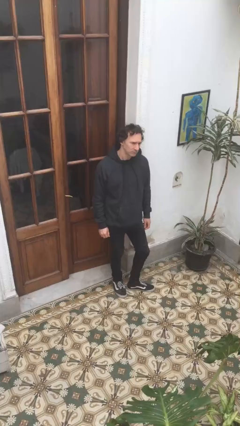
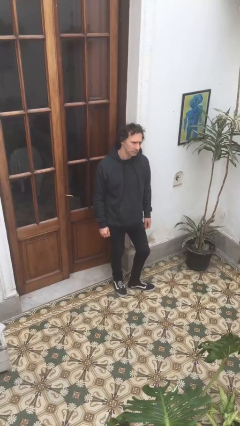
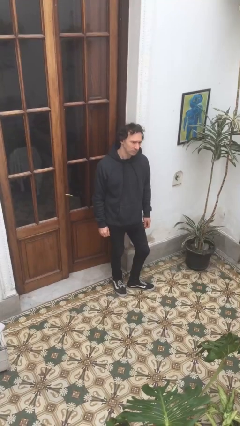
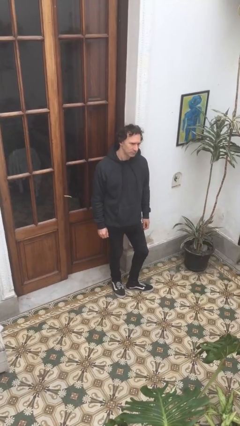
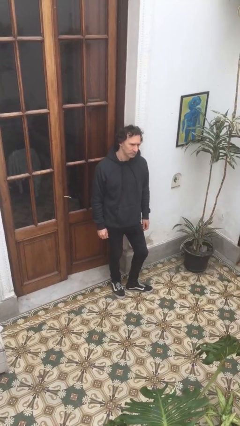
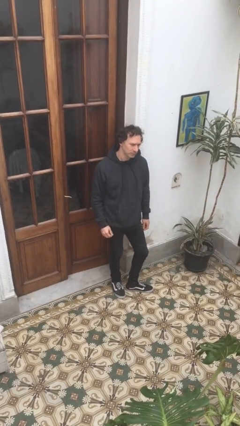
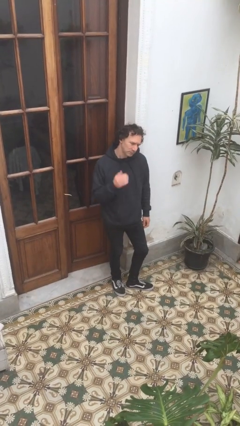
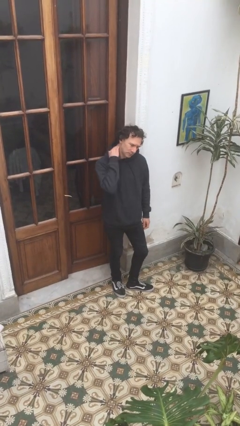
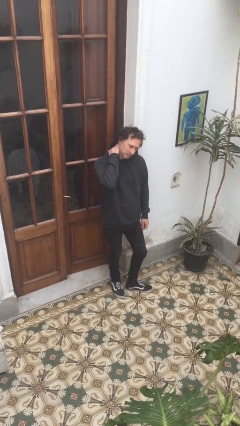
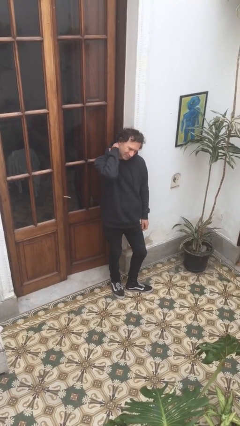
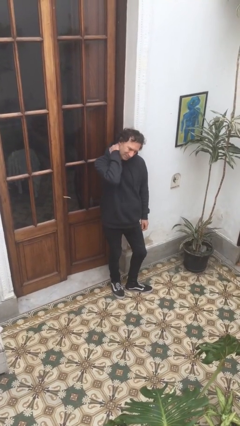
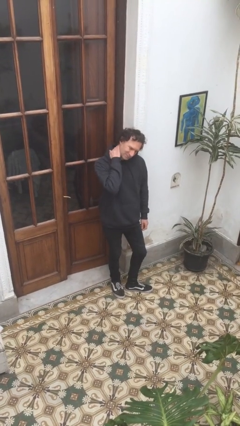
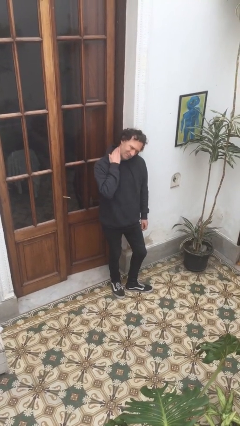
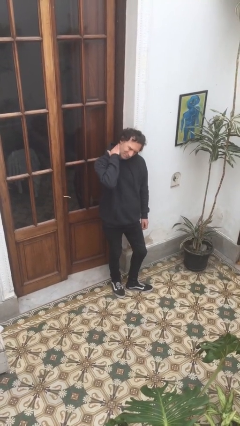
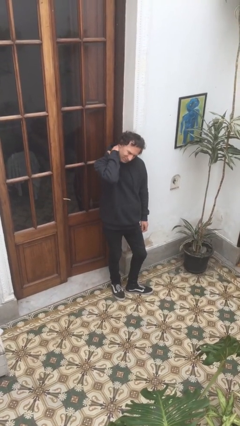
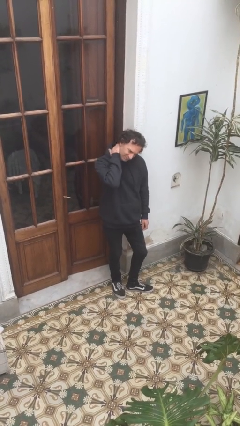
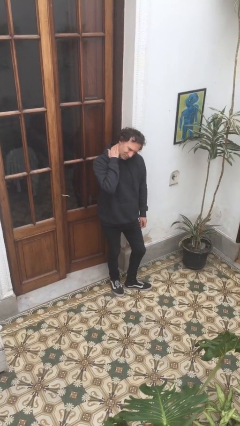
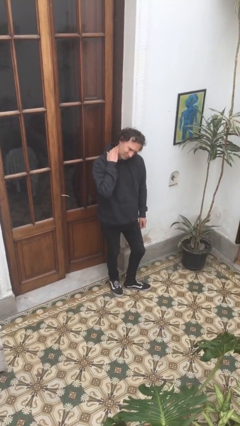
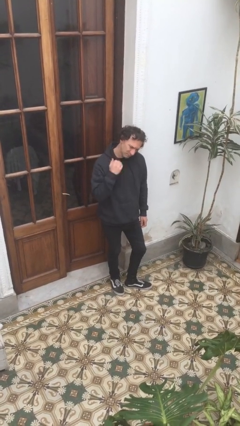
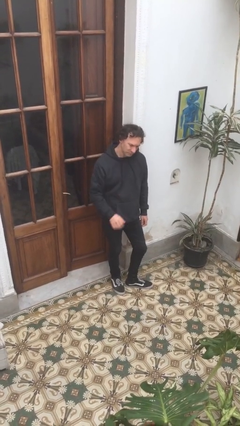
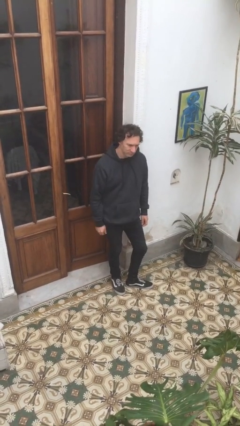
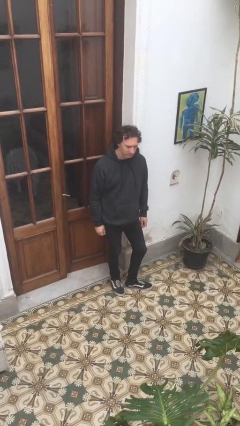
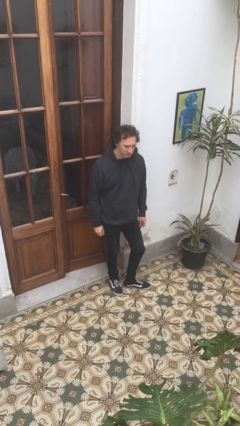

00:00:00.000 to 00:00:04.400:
person rubs neck

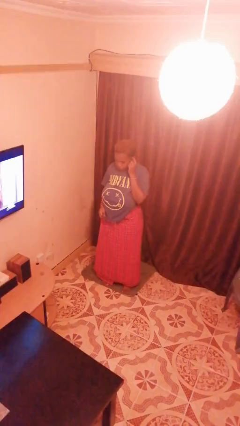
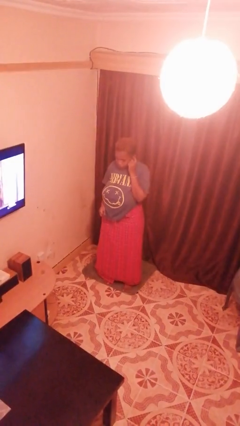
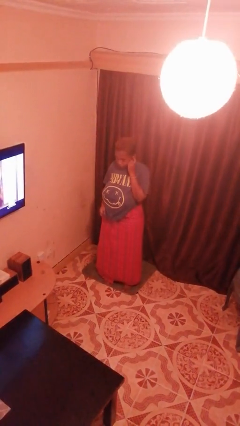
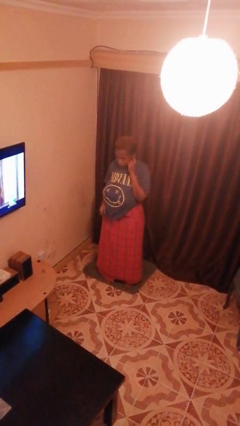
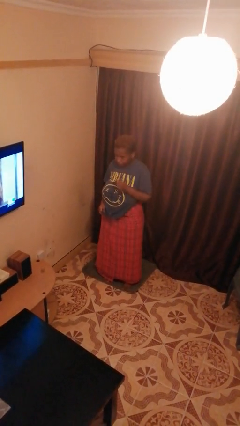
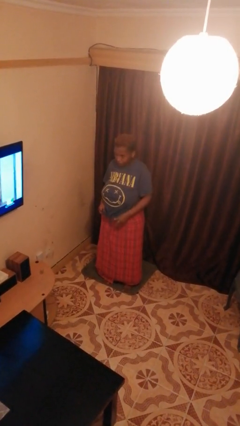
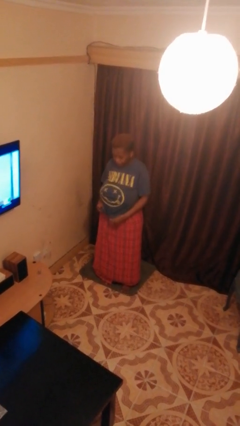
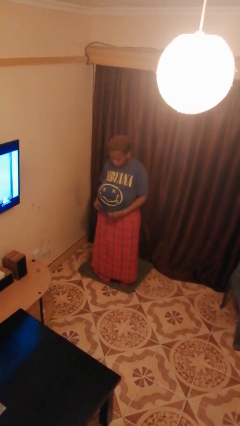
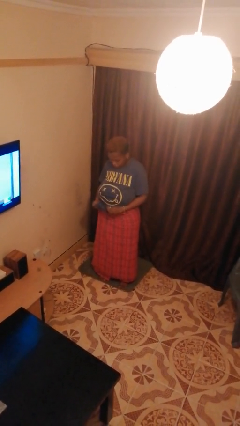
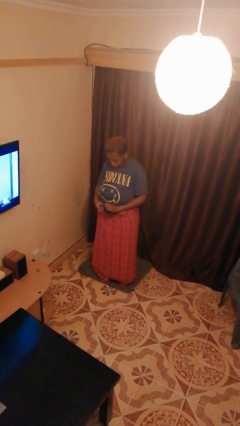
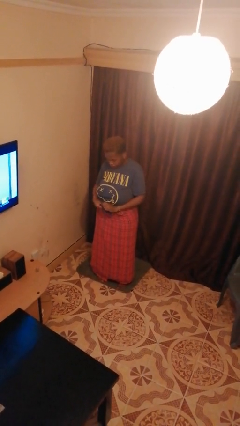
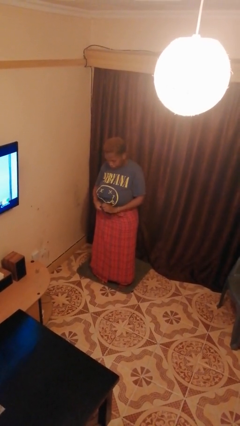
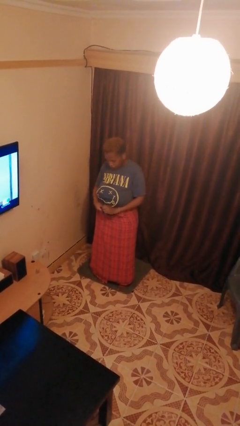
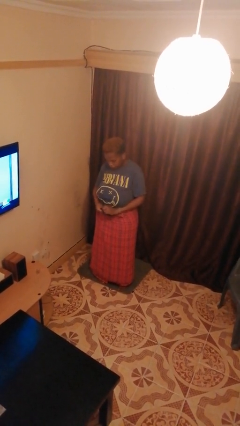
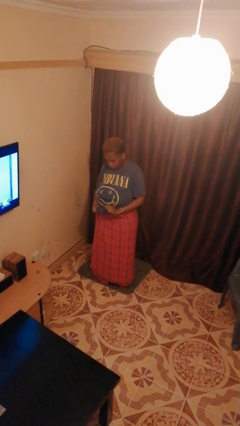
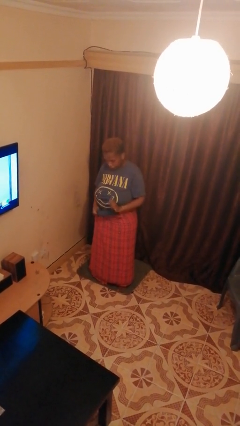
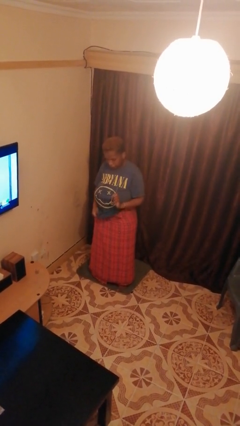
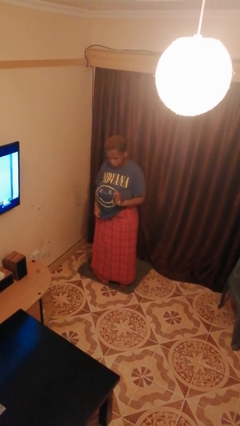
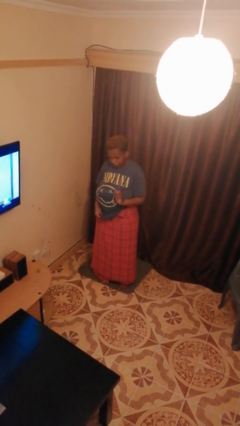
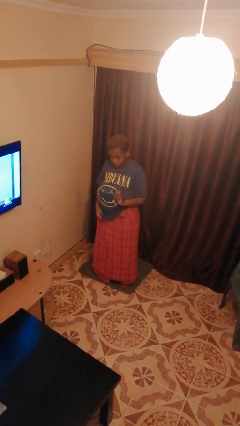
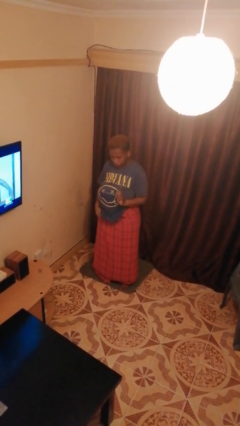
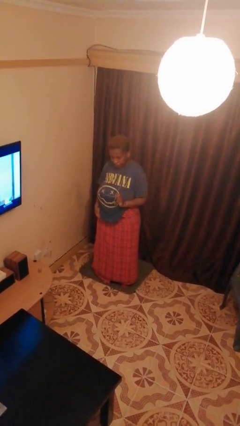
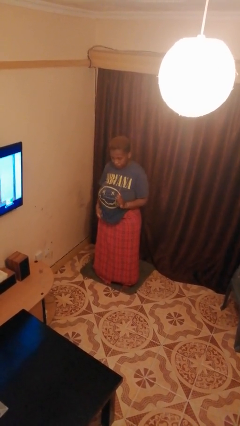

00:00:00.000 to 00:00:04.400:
person cleans eyeglasses

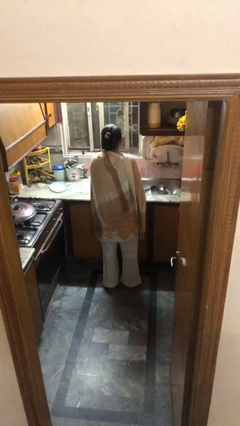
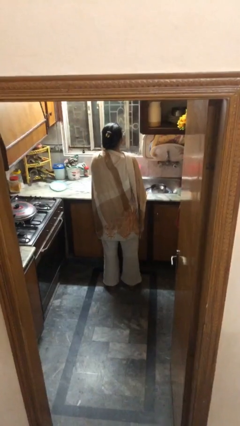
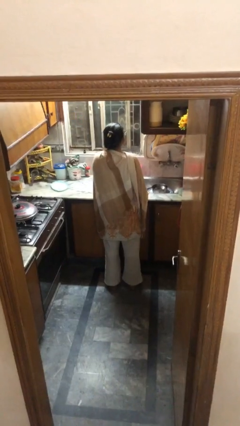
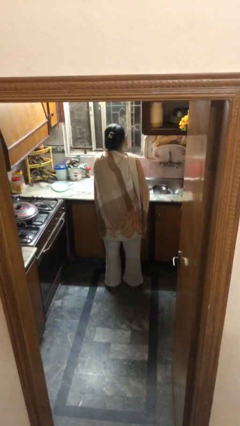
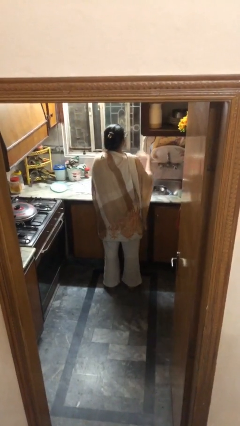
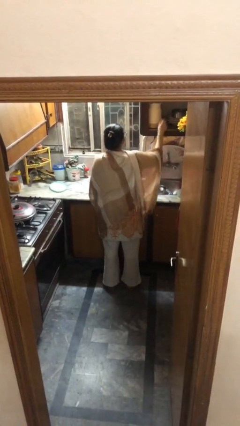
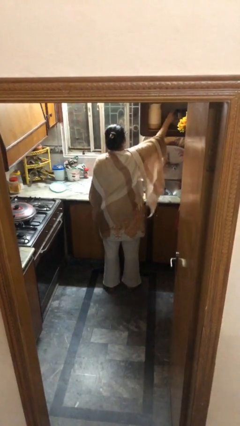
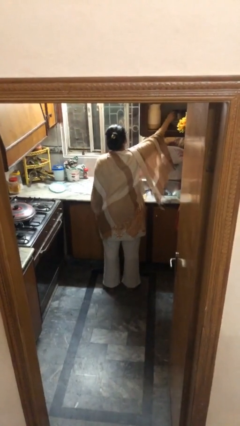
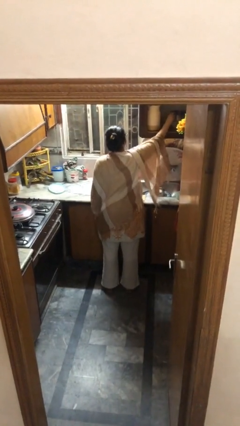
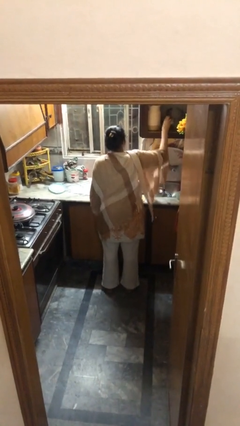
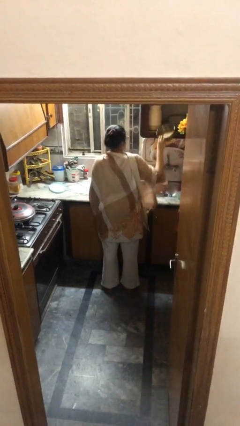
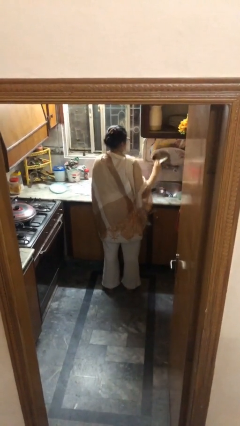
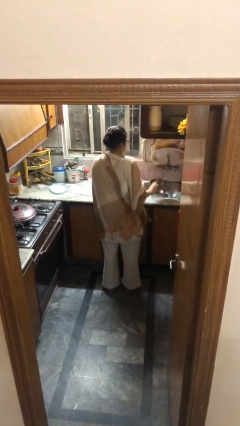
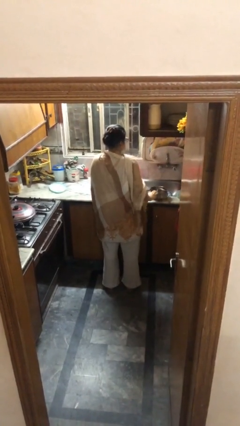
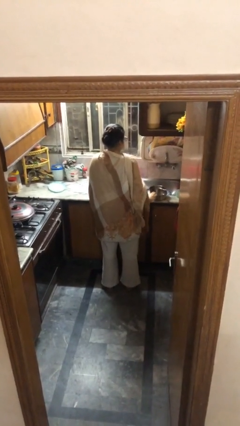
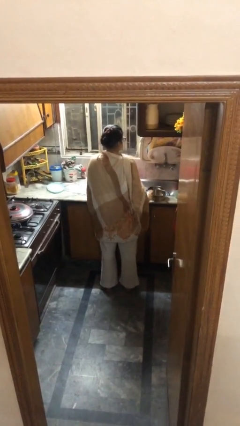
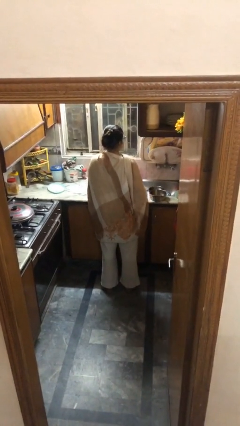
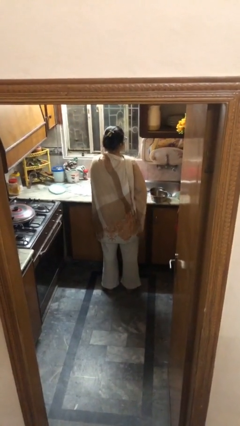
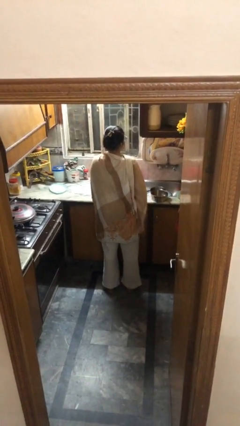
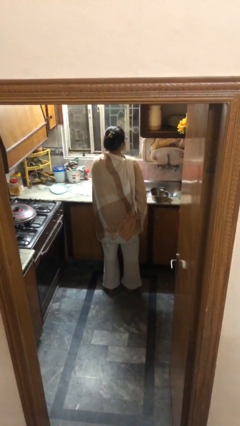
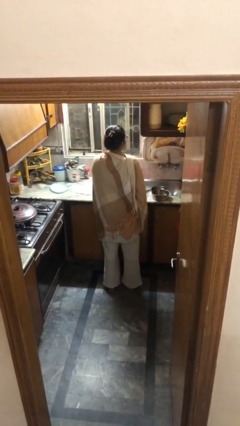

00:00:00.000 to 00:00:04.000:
person takes object from cabinet

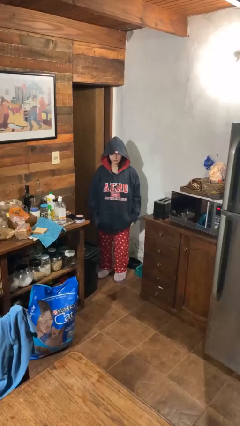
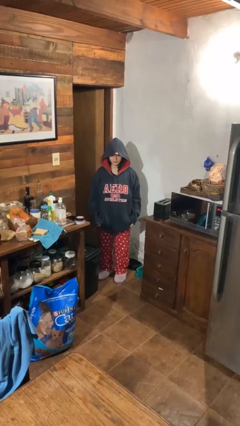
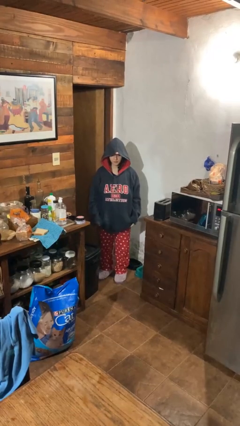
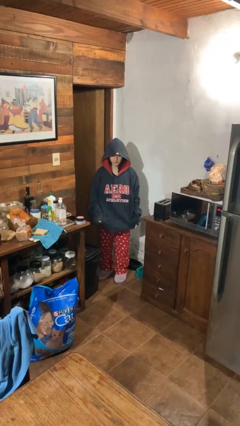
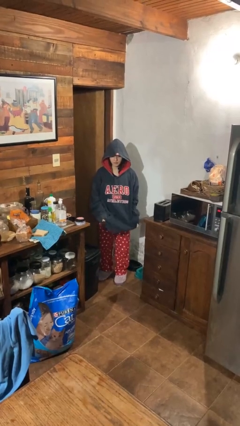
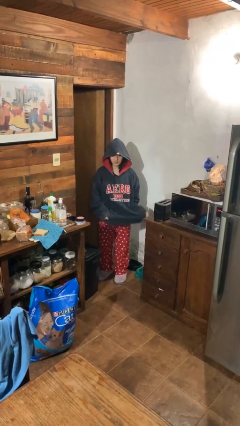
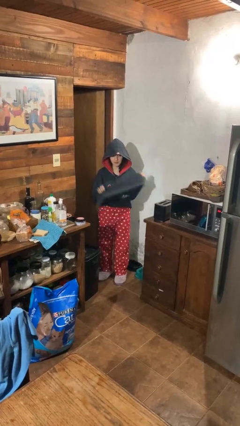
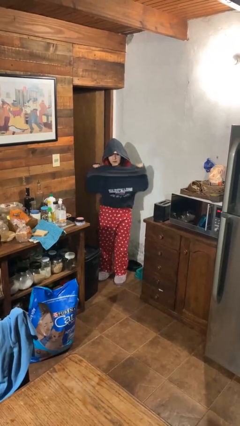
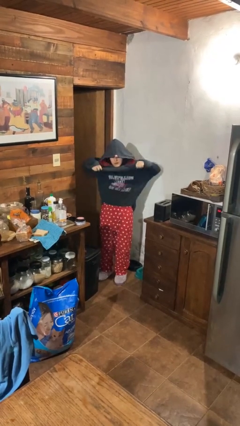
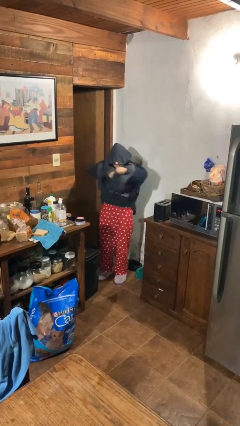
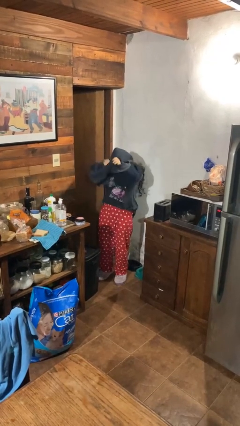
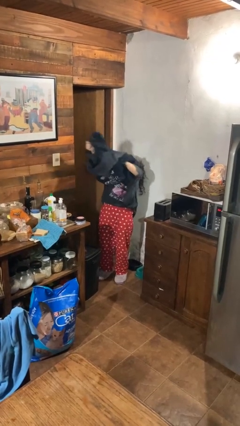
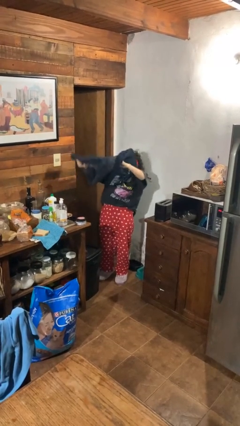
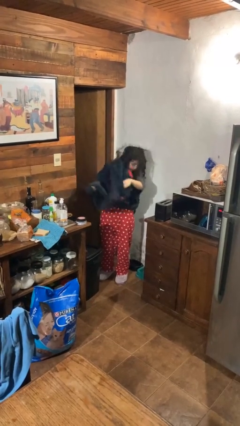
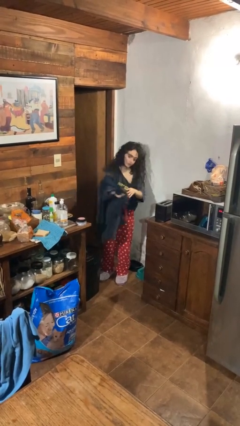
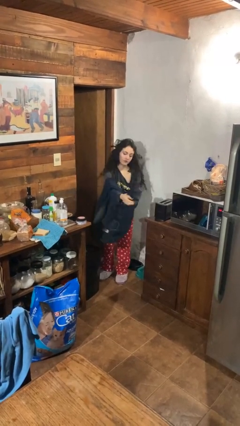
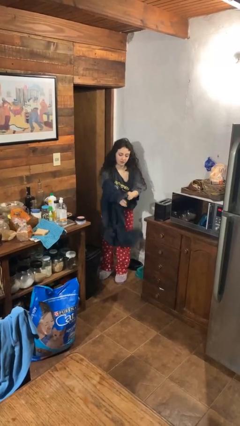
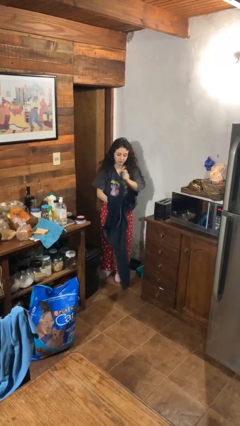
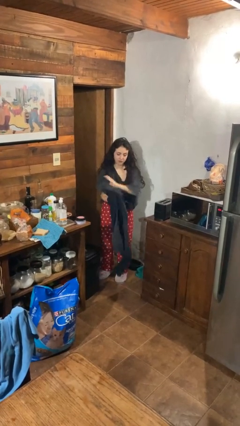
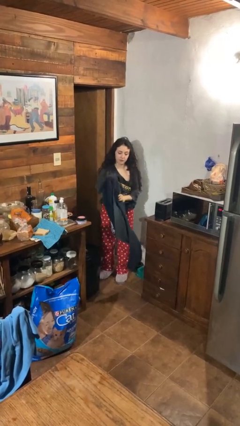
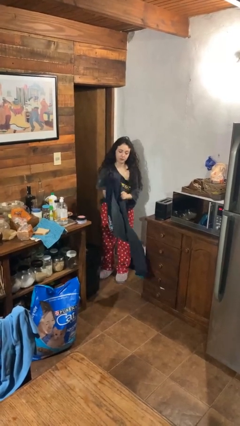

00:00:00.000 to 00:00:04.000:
person takes off hoodie

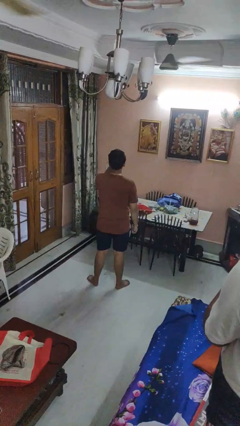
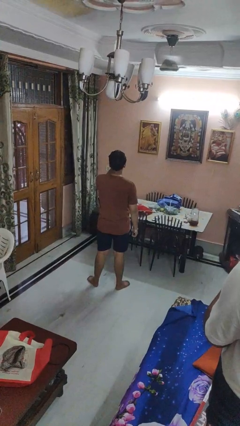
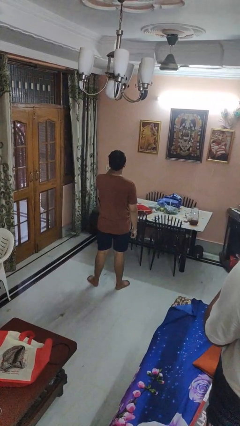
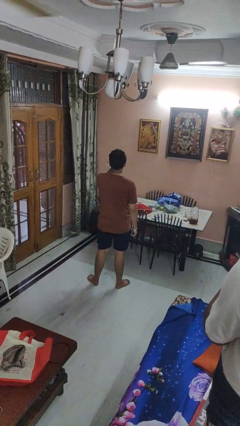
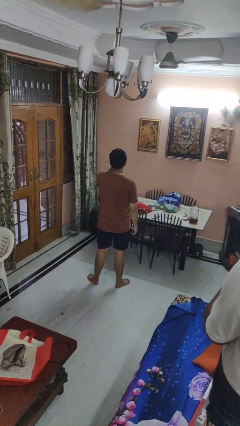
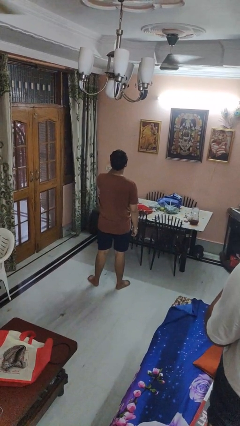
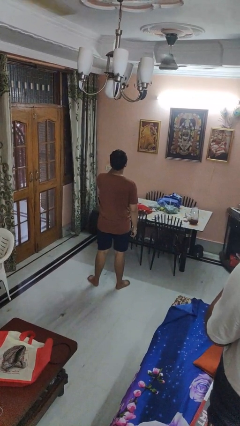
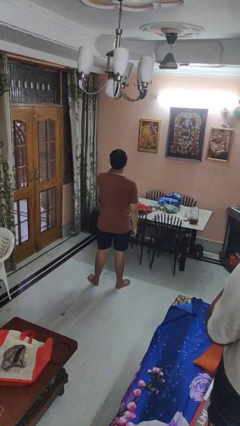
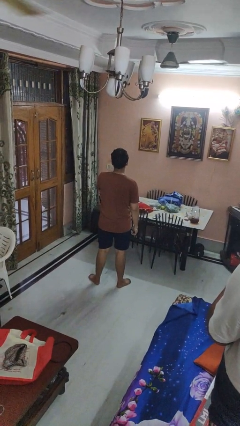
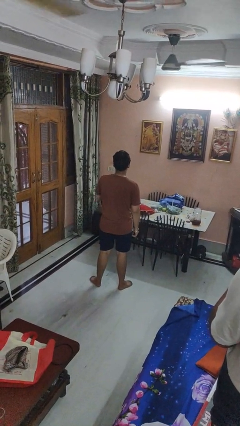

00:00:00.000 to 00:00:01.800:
person gestures watch closely
